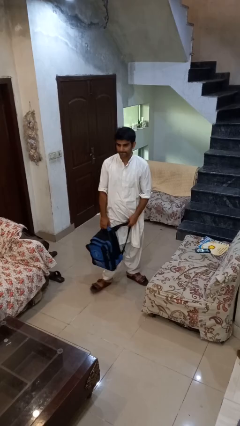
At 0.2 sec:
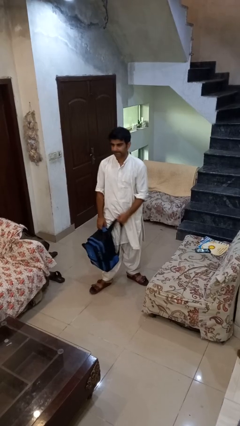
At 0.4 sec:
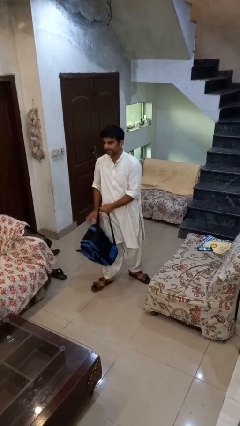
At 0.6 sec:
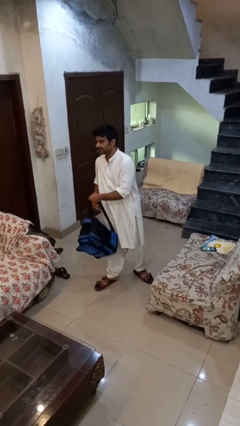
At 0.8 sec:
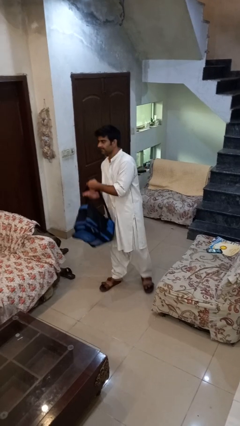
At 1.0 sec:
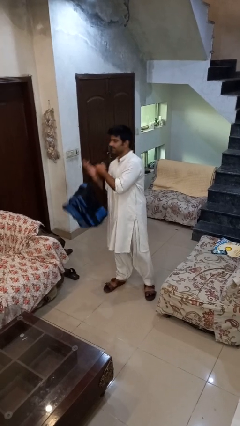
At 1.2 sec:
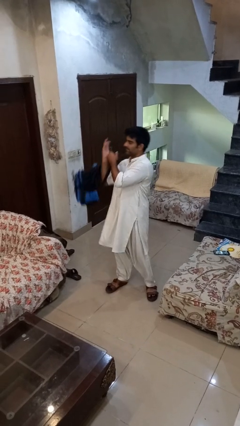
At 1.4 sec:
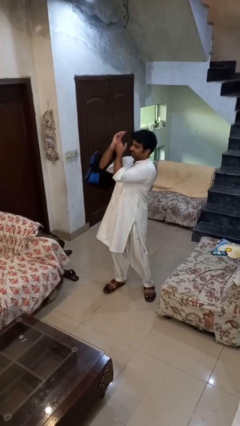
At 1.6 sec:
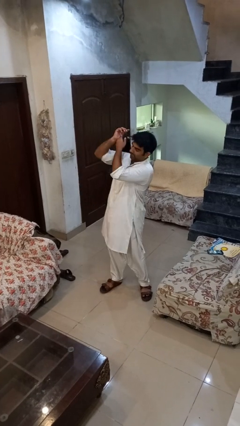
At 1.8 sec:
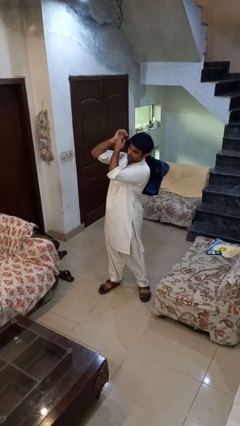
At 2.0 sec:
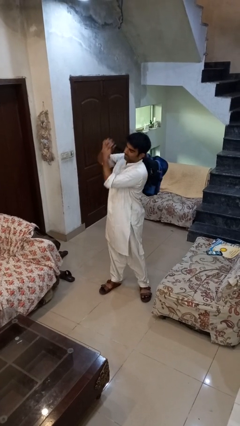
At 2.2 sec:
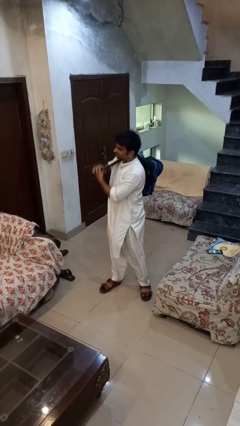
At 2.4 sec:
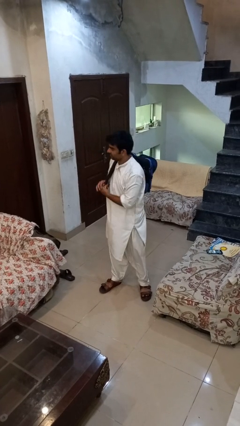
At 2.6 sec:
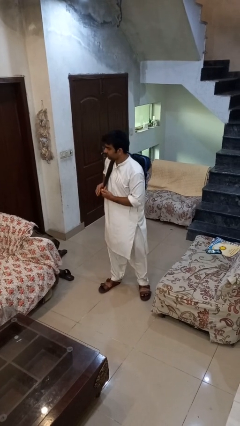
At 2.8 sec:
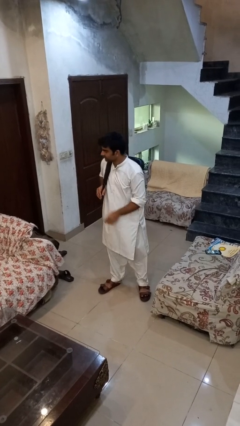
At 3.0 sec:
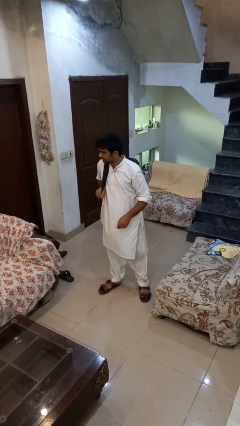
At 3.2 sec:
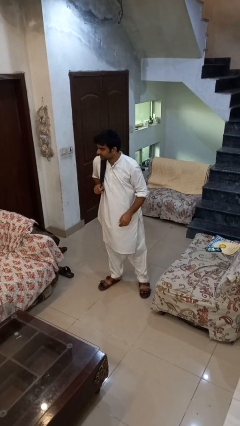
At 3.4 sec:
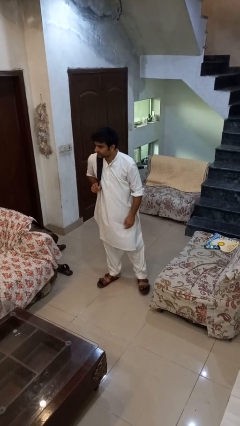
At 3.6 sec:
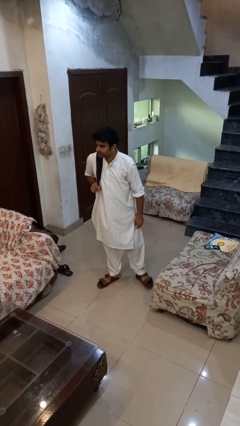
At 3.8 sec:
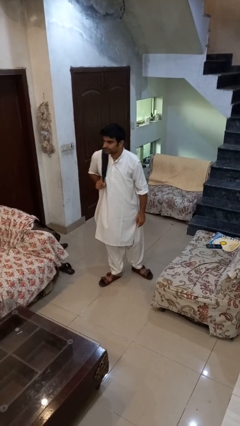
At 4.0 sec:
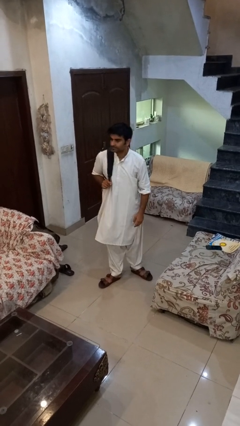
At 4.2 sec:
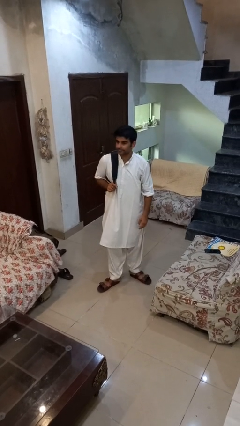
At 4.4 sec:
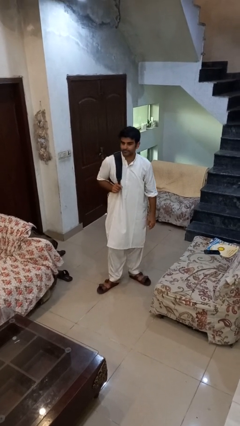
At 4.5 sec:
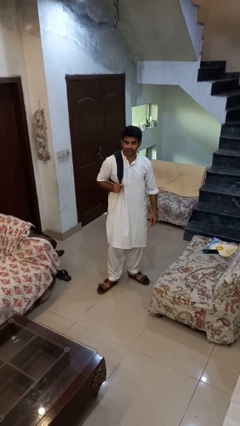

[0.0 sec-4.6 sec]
person puts on backpack

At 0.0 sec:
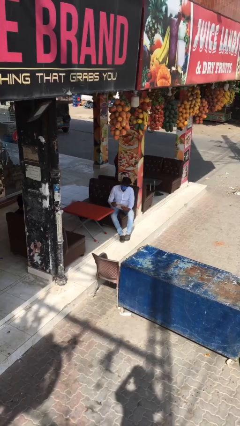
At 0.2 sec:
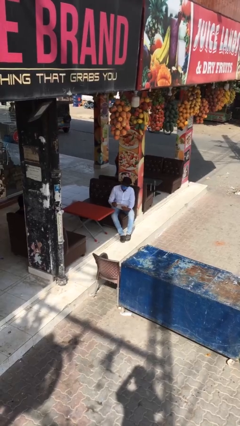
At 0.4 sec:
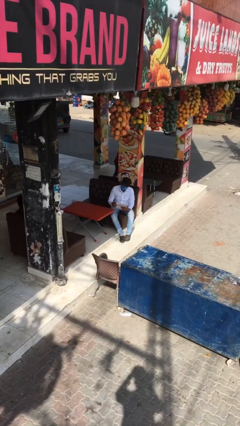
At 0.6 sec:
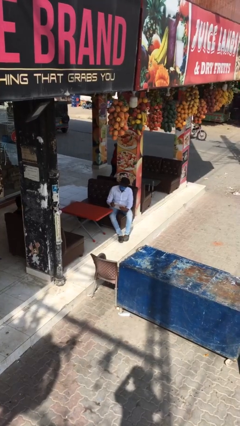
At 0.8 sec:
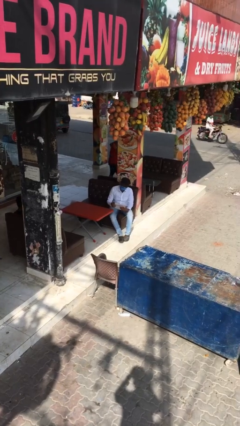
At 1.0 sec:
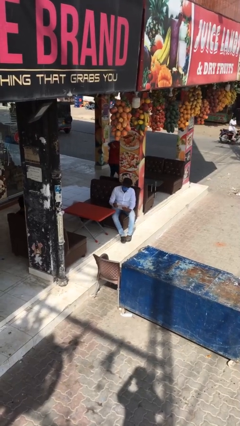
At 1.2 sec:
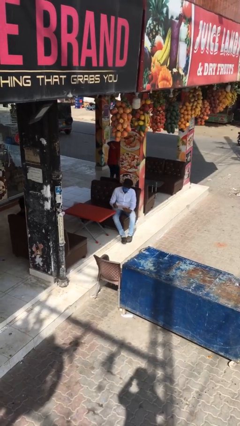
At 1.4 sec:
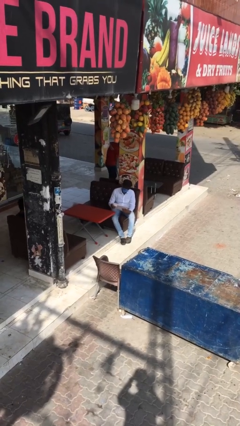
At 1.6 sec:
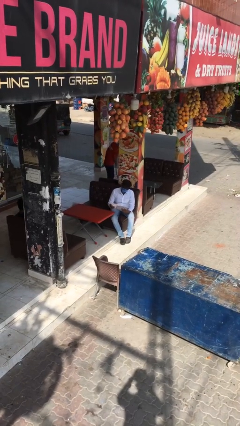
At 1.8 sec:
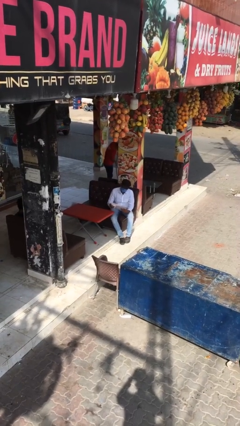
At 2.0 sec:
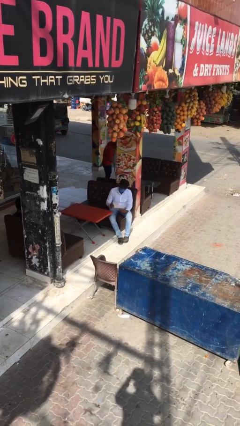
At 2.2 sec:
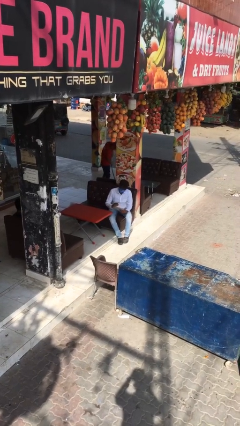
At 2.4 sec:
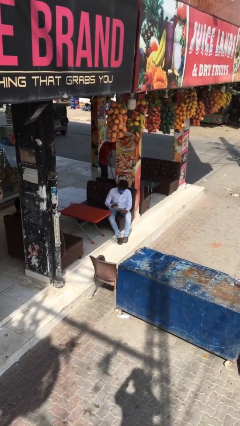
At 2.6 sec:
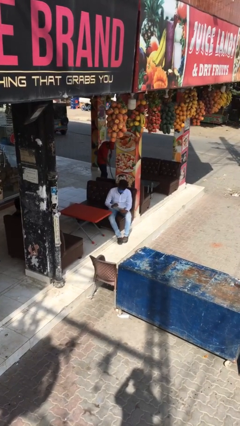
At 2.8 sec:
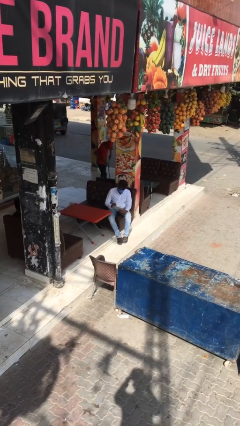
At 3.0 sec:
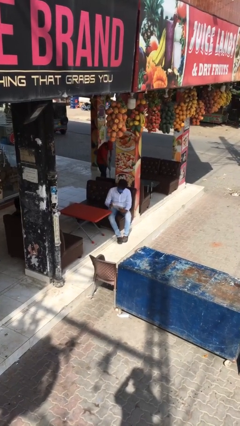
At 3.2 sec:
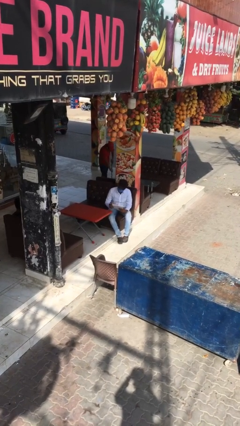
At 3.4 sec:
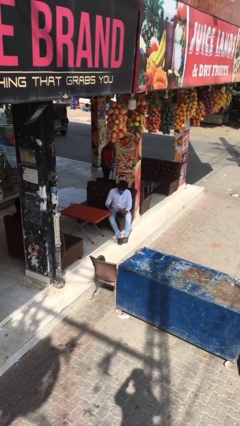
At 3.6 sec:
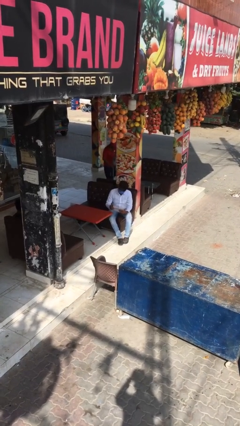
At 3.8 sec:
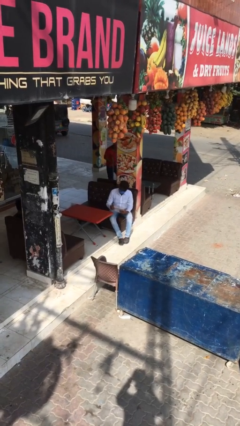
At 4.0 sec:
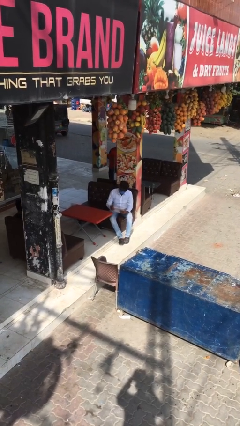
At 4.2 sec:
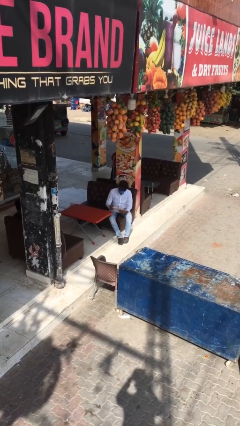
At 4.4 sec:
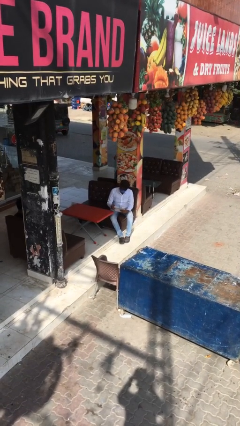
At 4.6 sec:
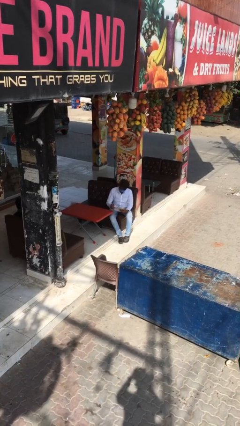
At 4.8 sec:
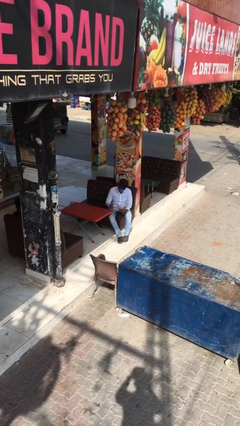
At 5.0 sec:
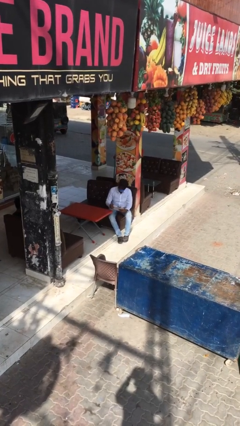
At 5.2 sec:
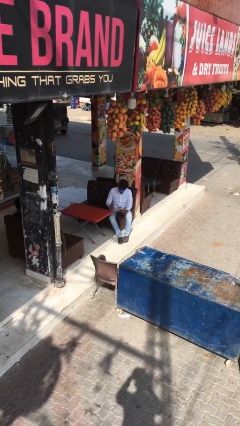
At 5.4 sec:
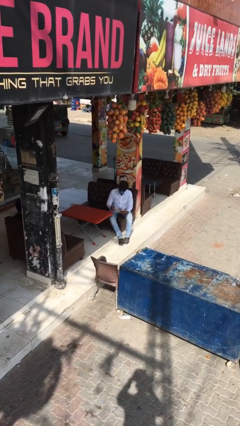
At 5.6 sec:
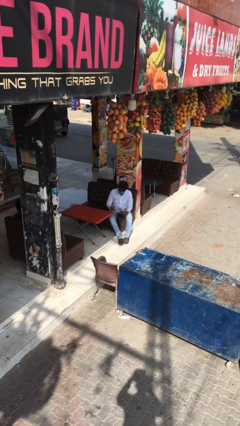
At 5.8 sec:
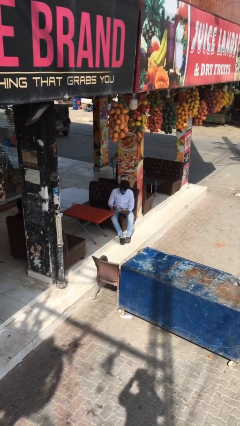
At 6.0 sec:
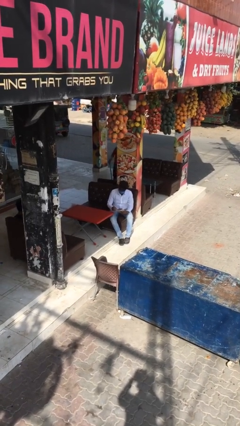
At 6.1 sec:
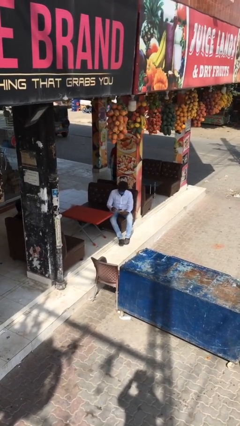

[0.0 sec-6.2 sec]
person reads document

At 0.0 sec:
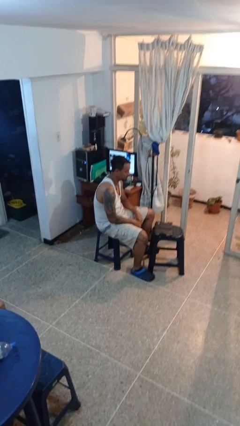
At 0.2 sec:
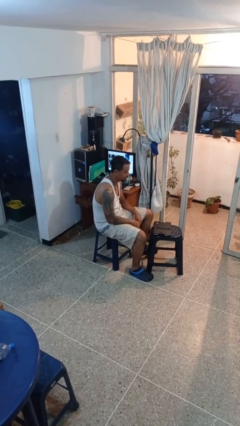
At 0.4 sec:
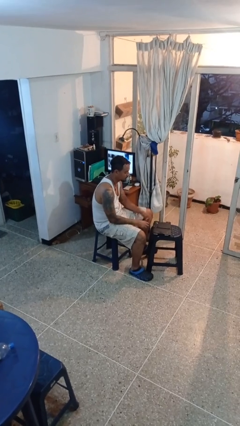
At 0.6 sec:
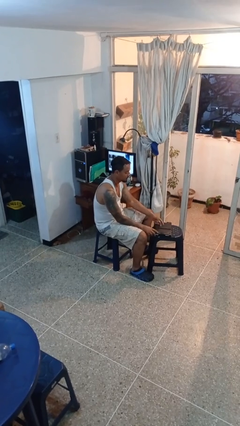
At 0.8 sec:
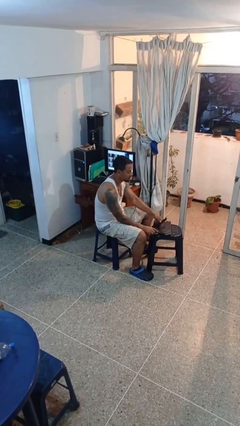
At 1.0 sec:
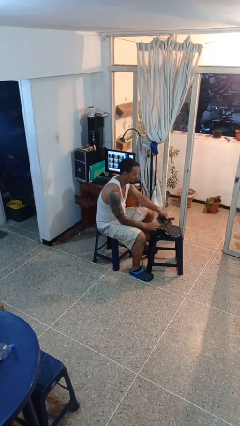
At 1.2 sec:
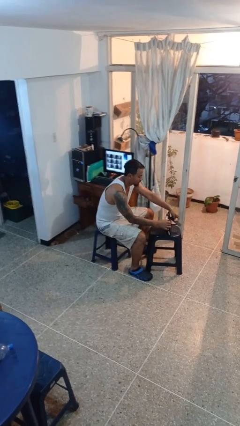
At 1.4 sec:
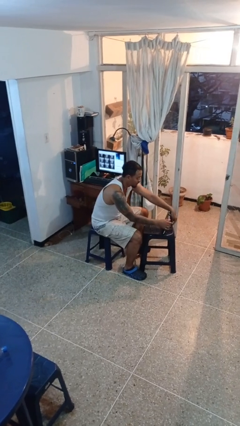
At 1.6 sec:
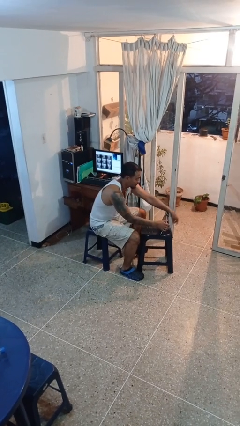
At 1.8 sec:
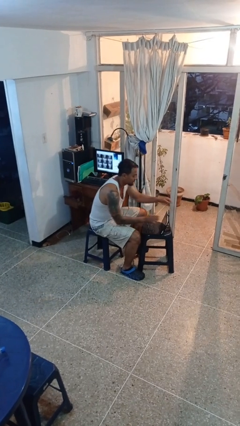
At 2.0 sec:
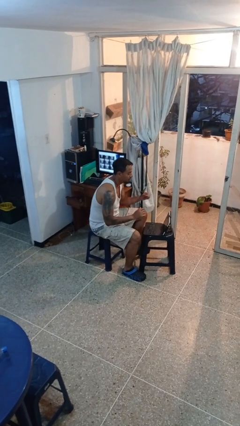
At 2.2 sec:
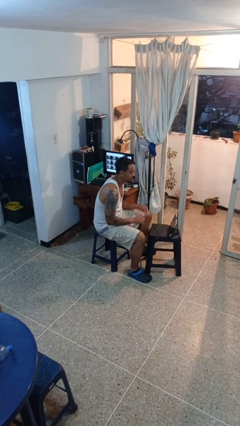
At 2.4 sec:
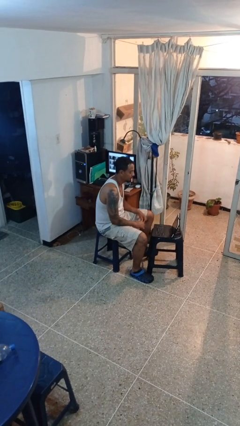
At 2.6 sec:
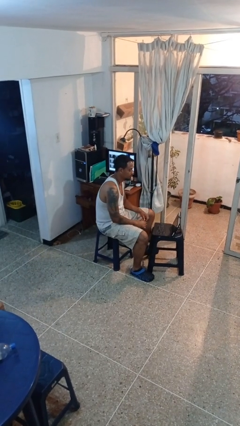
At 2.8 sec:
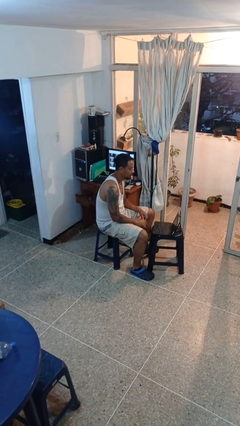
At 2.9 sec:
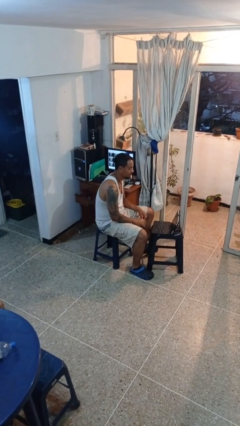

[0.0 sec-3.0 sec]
person opens laptop

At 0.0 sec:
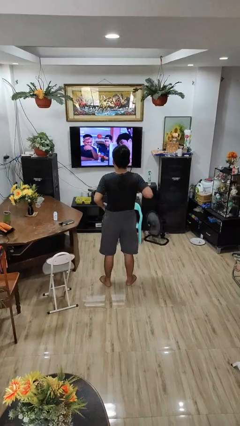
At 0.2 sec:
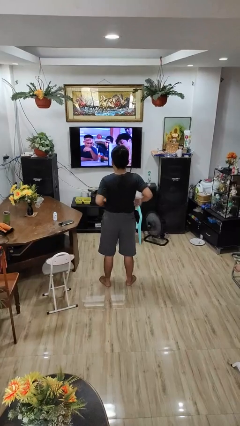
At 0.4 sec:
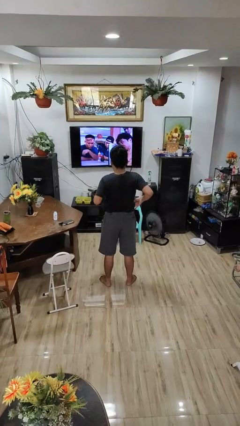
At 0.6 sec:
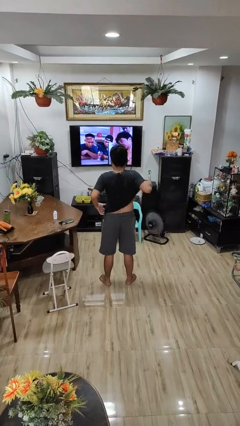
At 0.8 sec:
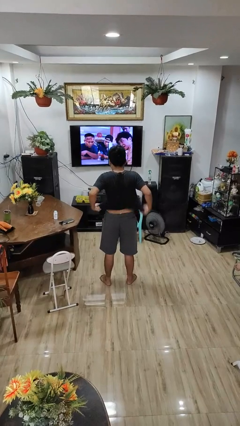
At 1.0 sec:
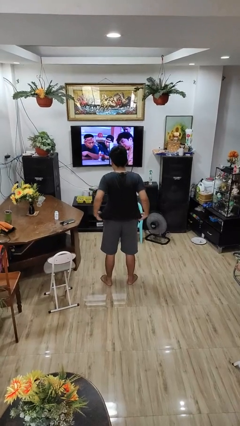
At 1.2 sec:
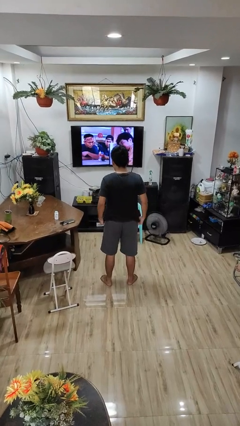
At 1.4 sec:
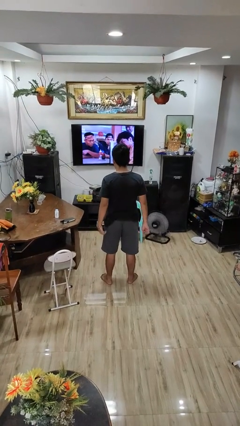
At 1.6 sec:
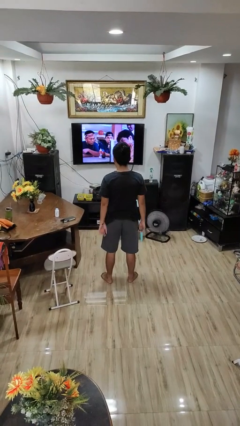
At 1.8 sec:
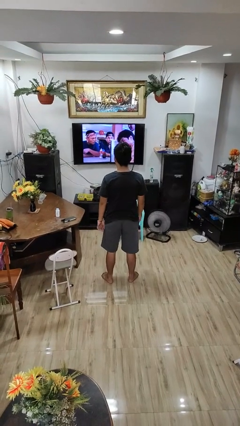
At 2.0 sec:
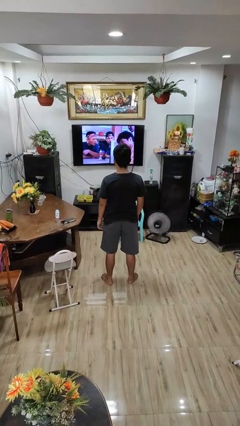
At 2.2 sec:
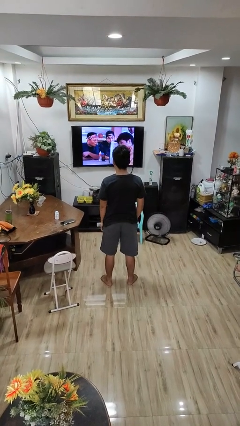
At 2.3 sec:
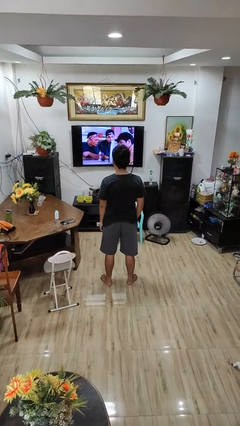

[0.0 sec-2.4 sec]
person untucks shirt

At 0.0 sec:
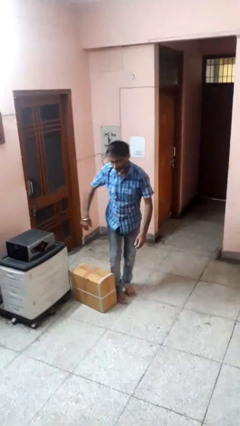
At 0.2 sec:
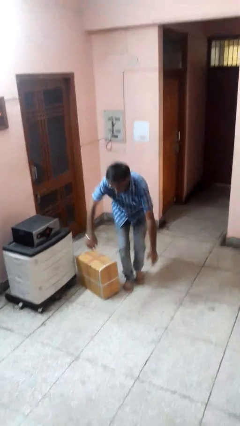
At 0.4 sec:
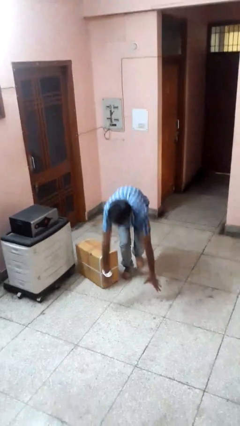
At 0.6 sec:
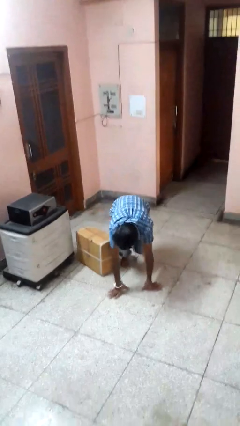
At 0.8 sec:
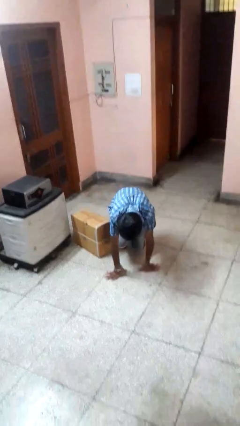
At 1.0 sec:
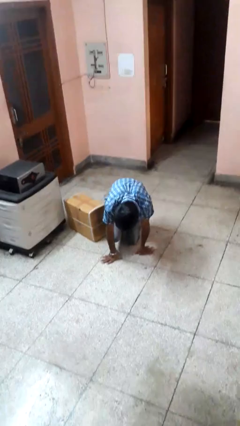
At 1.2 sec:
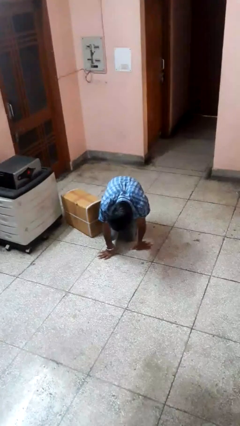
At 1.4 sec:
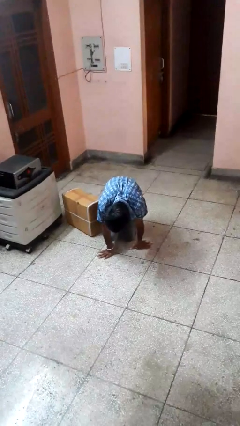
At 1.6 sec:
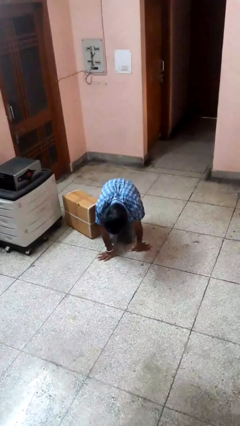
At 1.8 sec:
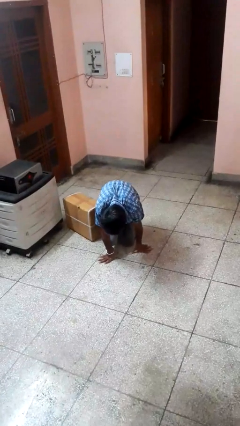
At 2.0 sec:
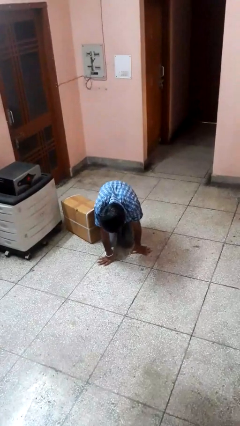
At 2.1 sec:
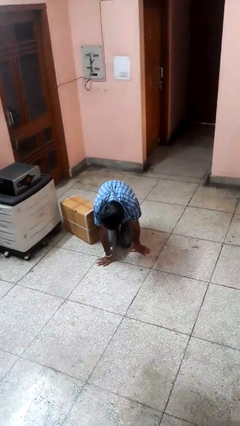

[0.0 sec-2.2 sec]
person trips on object on floor
